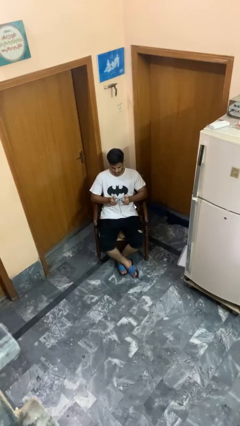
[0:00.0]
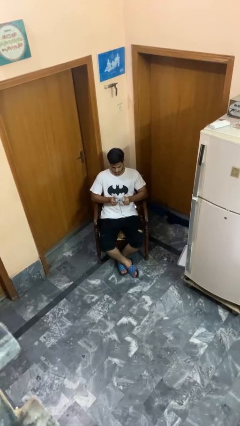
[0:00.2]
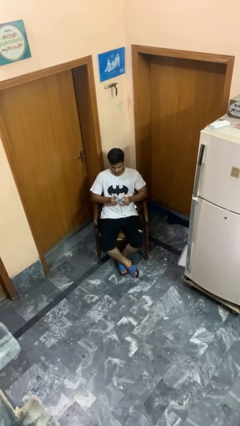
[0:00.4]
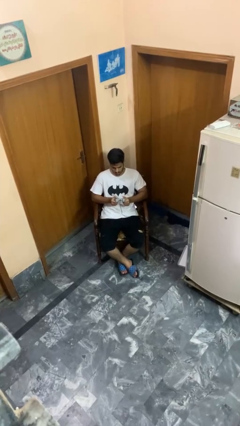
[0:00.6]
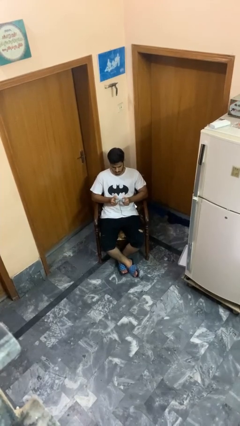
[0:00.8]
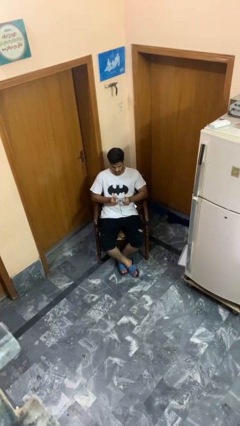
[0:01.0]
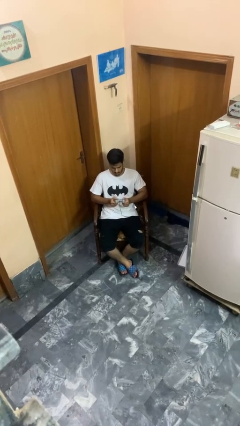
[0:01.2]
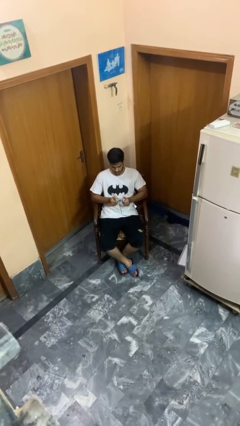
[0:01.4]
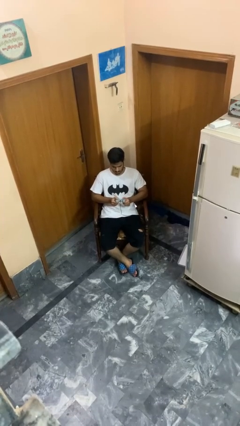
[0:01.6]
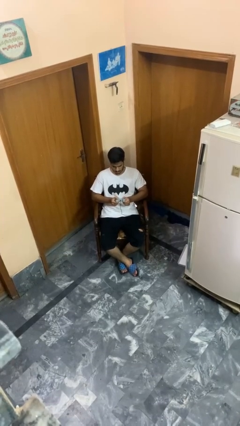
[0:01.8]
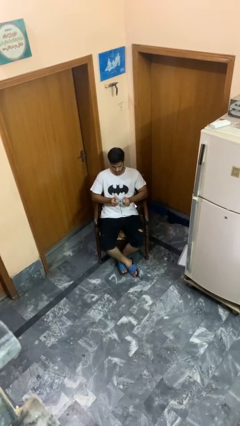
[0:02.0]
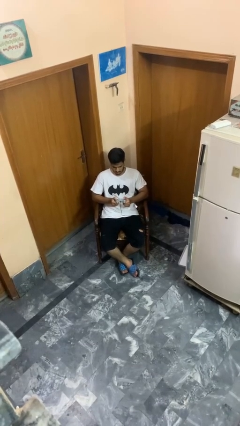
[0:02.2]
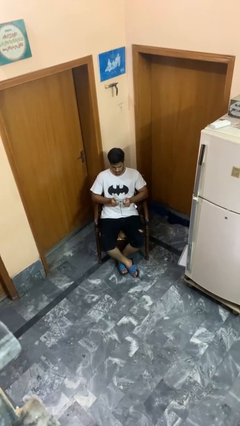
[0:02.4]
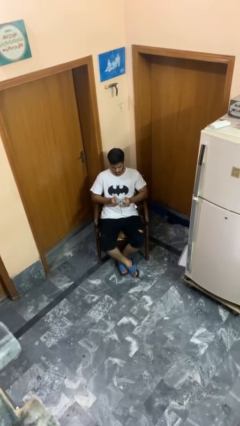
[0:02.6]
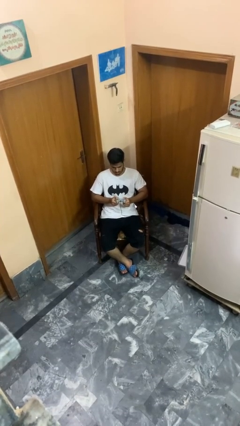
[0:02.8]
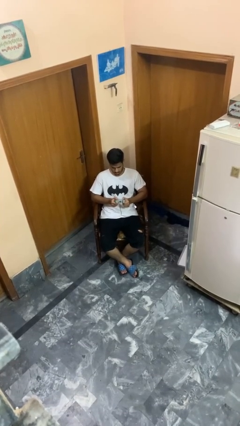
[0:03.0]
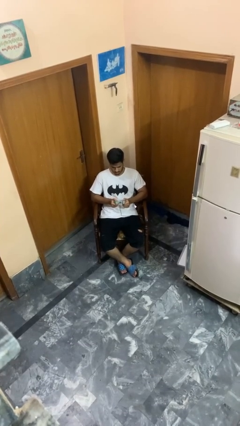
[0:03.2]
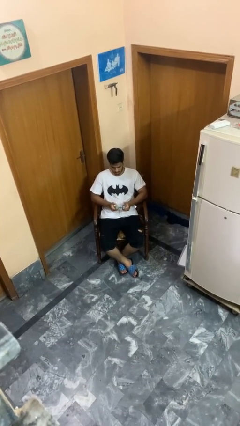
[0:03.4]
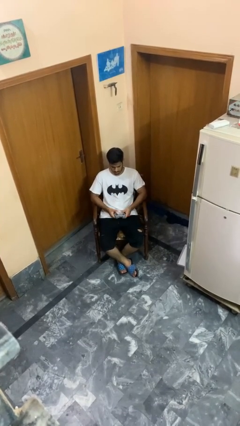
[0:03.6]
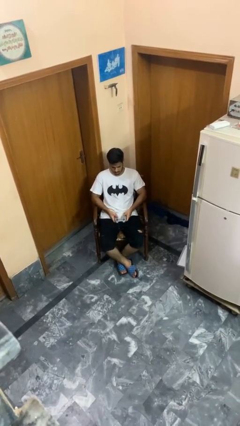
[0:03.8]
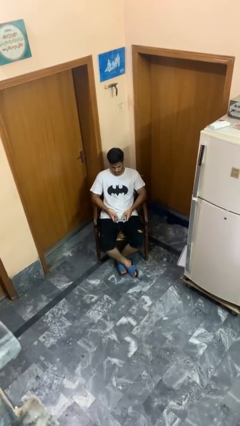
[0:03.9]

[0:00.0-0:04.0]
person interacts with handheld game

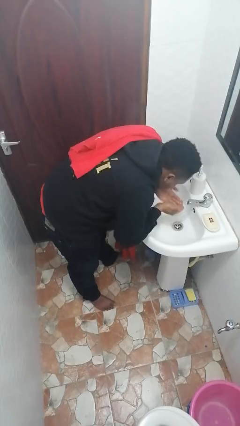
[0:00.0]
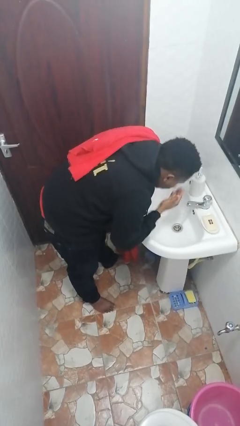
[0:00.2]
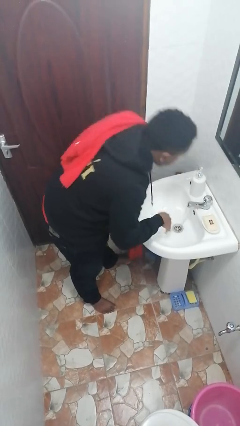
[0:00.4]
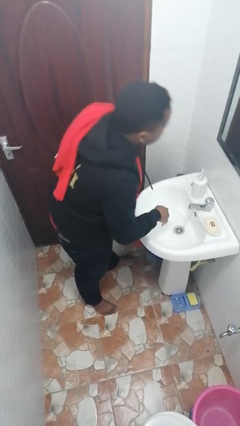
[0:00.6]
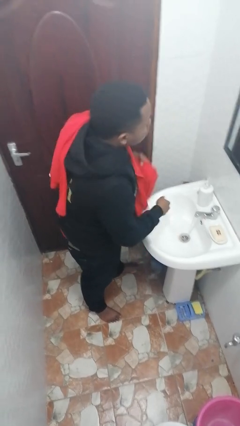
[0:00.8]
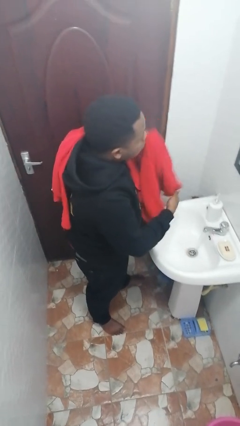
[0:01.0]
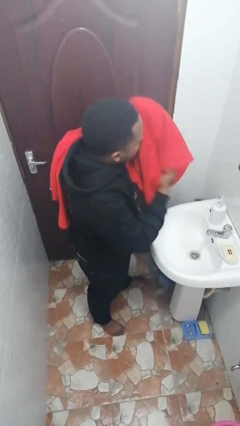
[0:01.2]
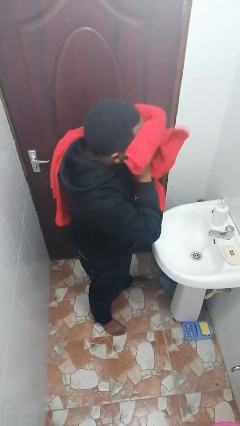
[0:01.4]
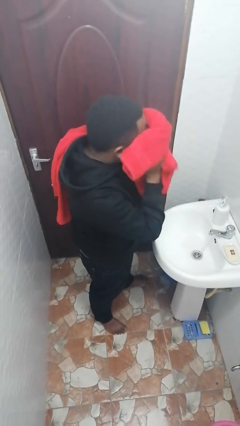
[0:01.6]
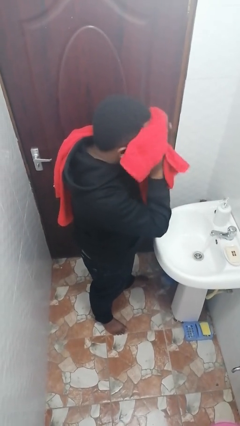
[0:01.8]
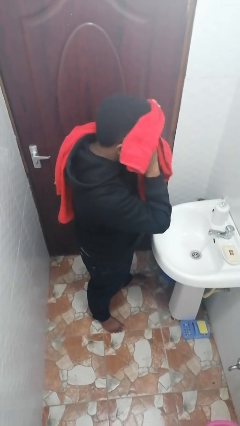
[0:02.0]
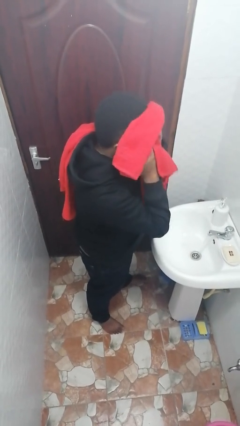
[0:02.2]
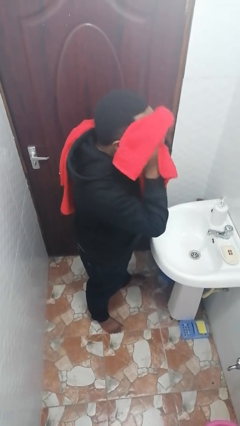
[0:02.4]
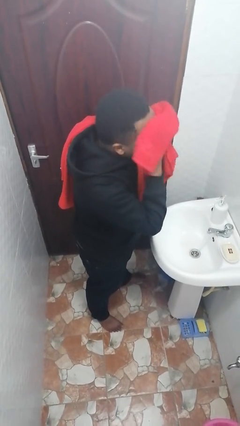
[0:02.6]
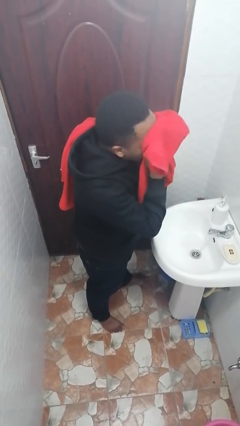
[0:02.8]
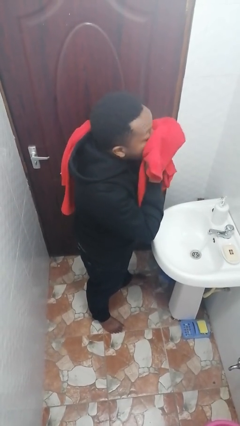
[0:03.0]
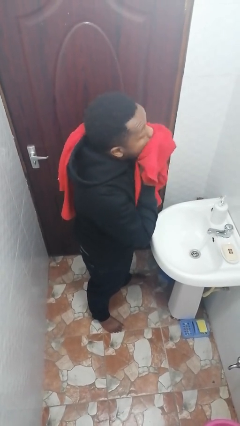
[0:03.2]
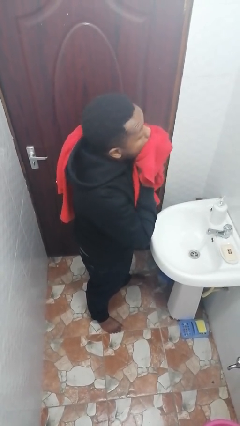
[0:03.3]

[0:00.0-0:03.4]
person dries face with towel

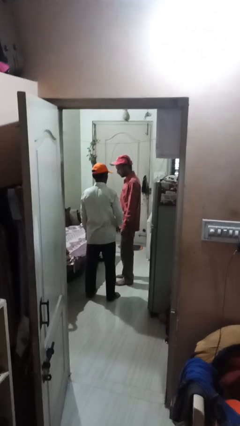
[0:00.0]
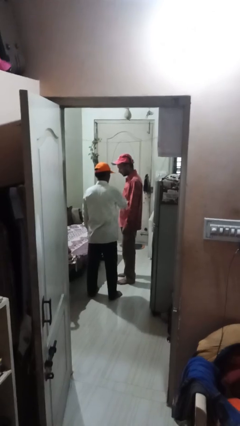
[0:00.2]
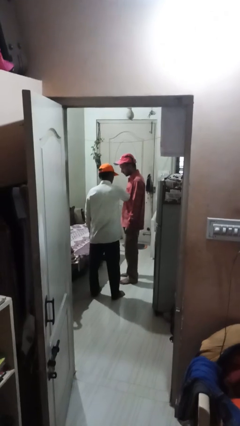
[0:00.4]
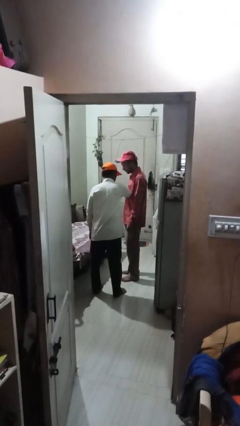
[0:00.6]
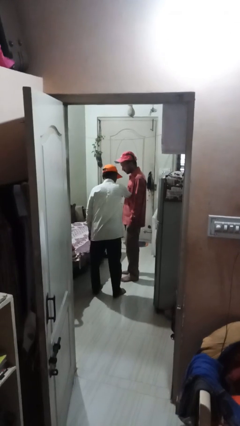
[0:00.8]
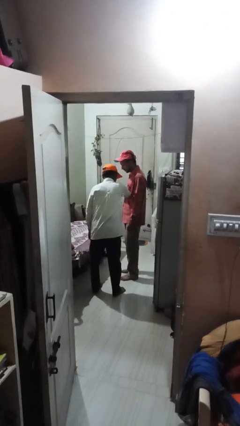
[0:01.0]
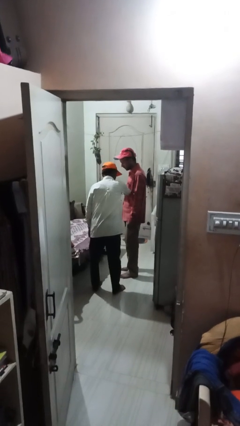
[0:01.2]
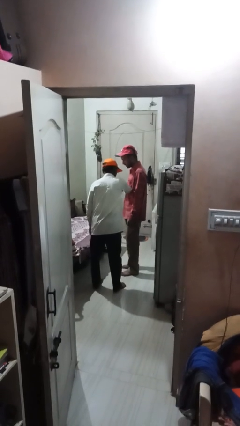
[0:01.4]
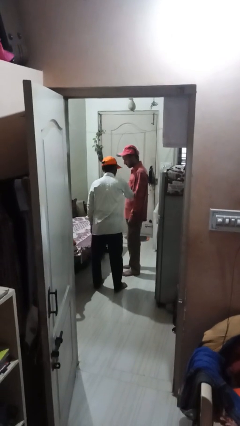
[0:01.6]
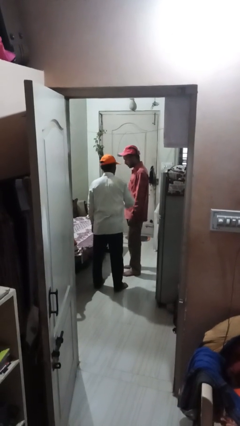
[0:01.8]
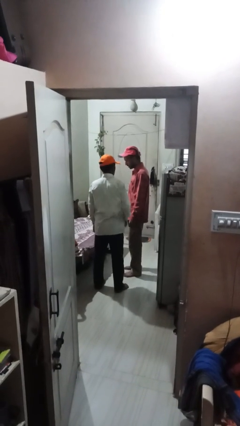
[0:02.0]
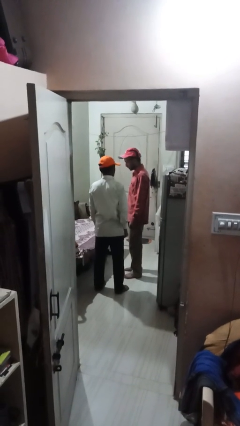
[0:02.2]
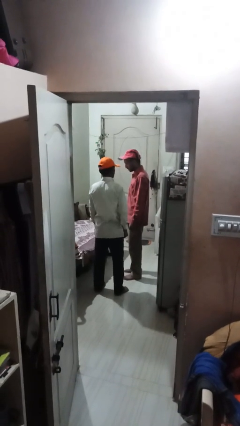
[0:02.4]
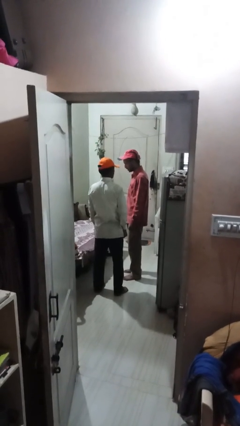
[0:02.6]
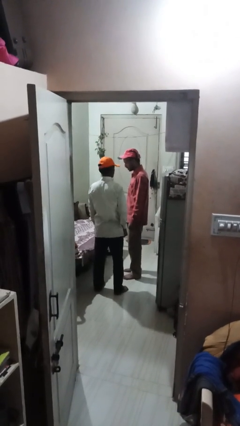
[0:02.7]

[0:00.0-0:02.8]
person nudges person with elbow

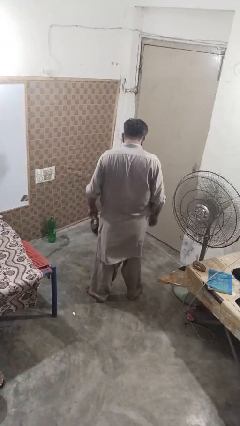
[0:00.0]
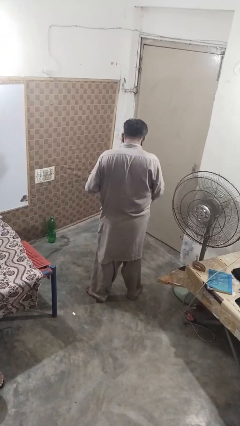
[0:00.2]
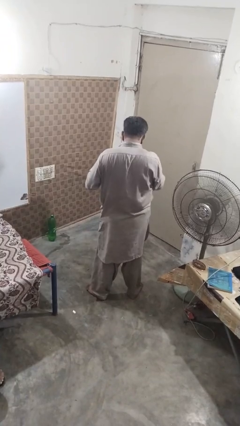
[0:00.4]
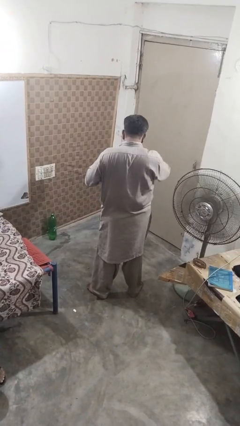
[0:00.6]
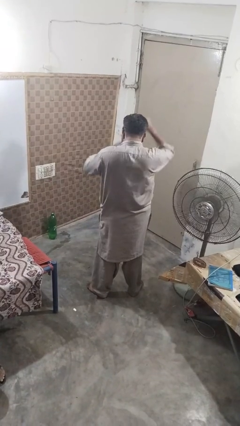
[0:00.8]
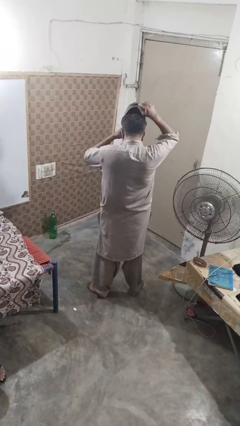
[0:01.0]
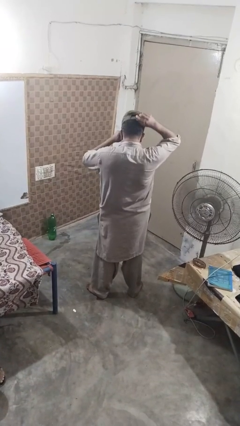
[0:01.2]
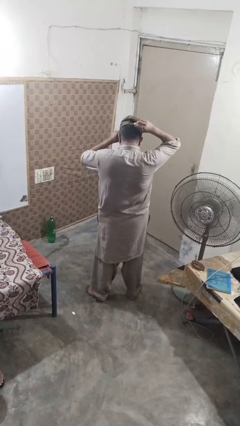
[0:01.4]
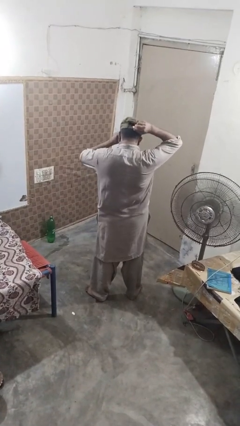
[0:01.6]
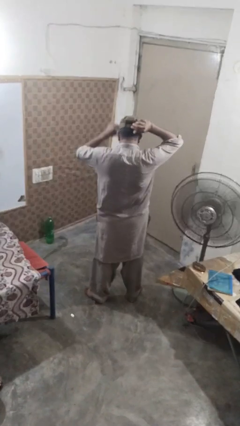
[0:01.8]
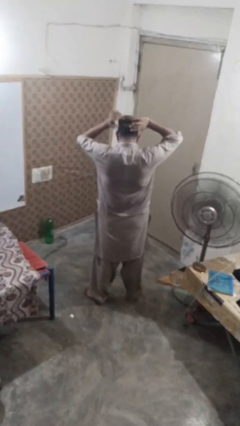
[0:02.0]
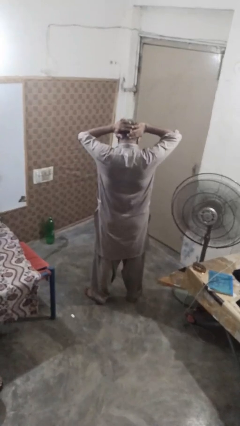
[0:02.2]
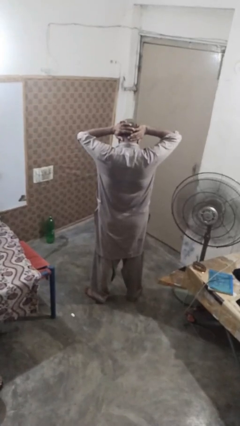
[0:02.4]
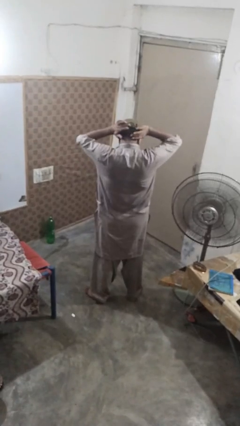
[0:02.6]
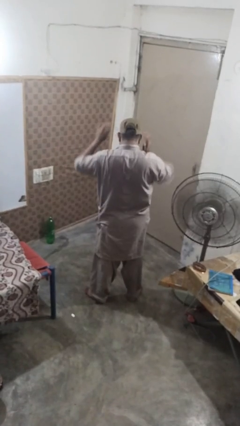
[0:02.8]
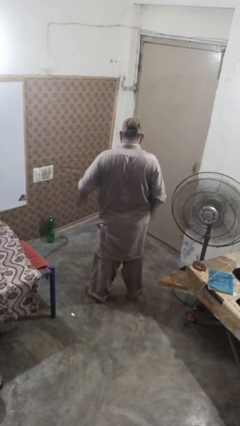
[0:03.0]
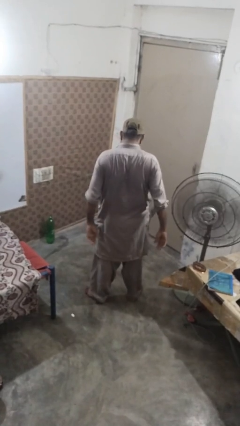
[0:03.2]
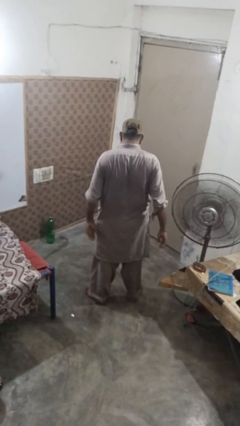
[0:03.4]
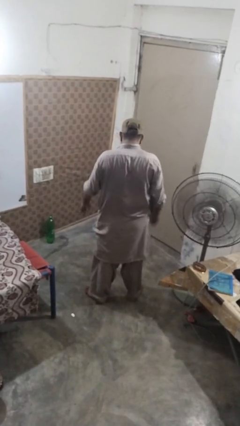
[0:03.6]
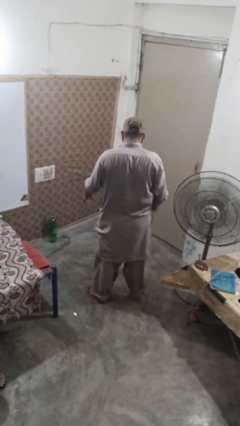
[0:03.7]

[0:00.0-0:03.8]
person puts on hat

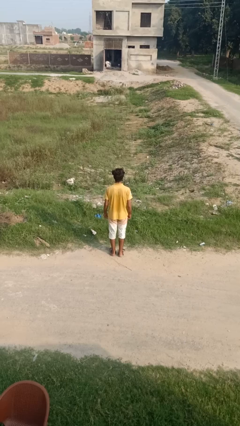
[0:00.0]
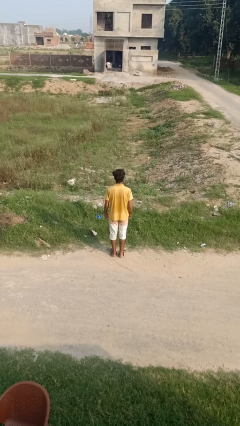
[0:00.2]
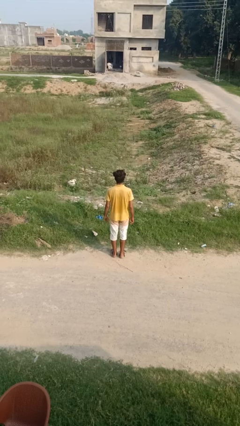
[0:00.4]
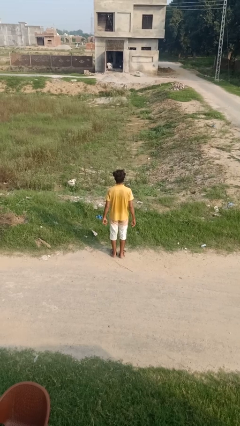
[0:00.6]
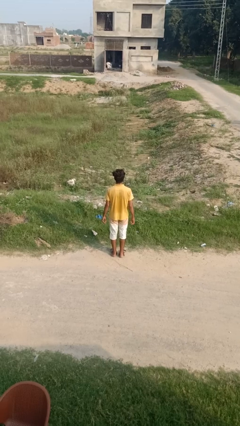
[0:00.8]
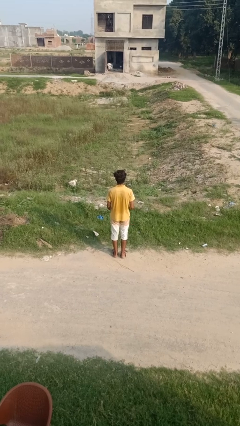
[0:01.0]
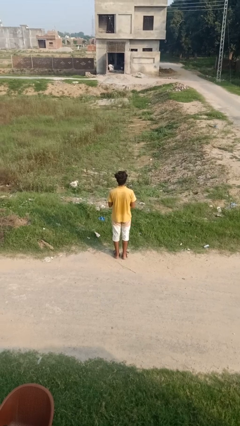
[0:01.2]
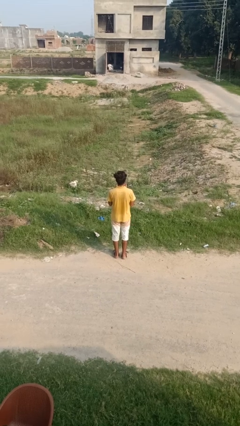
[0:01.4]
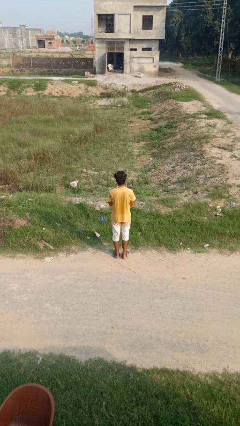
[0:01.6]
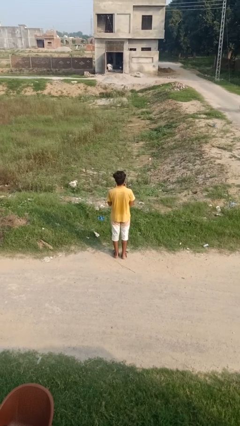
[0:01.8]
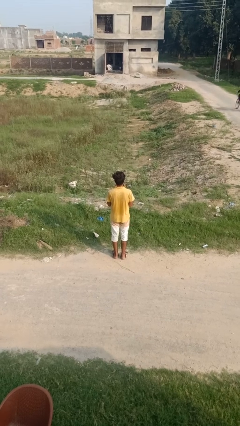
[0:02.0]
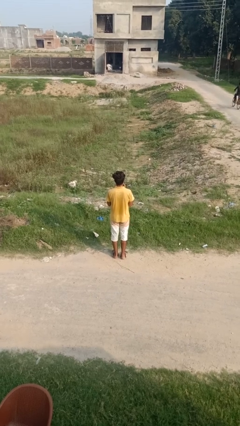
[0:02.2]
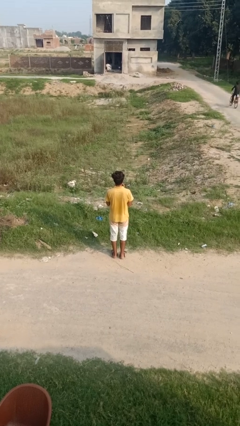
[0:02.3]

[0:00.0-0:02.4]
person prays

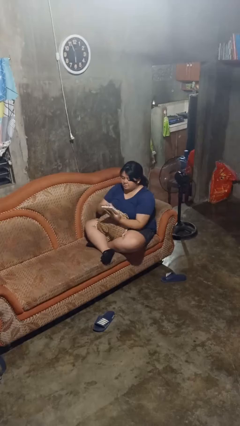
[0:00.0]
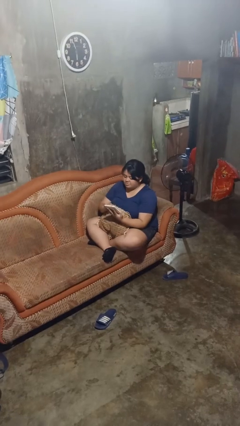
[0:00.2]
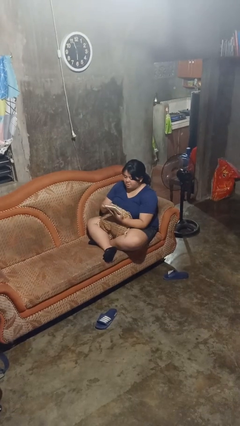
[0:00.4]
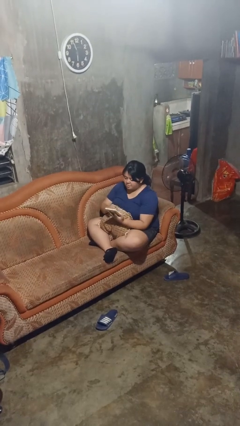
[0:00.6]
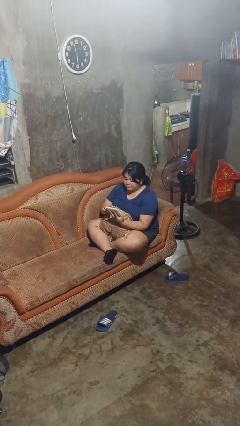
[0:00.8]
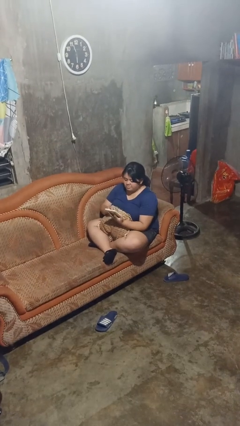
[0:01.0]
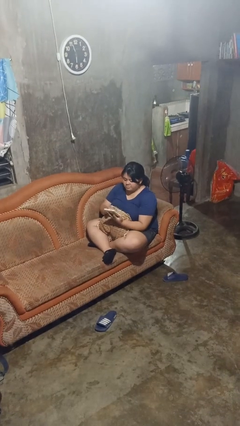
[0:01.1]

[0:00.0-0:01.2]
person interacts with tablet
